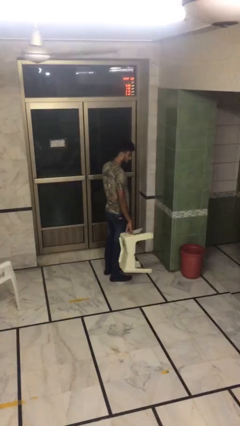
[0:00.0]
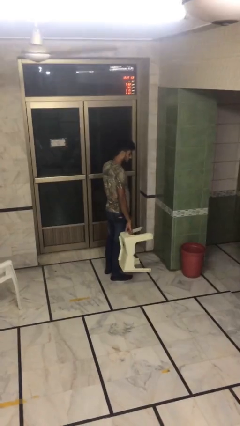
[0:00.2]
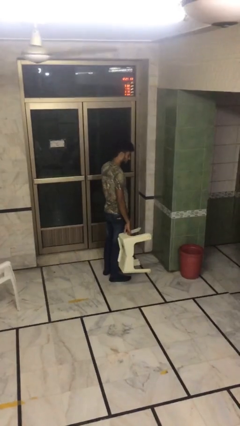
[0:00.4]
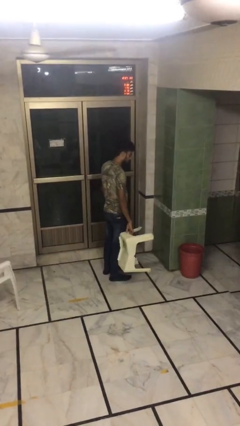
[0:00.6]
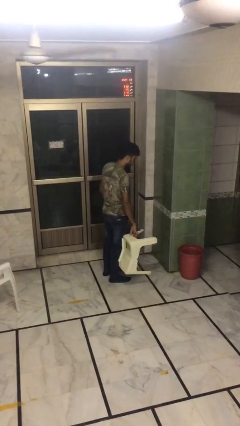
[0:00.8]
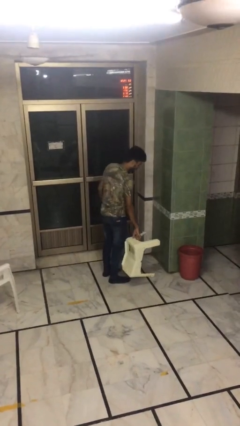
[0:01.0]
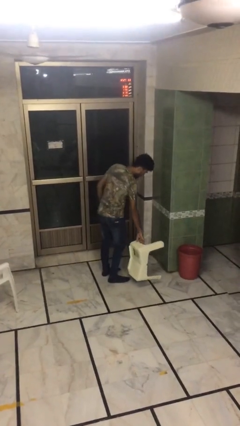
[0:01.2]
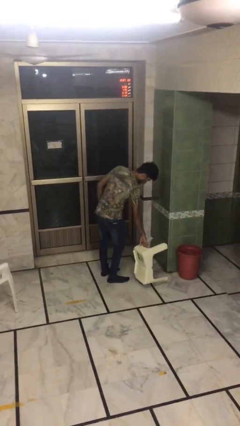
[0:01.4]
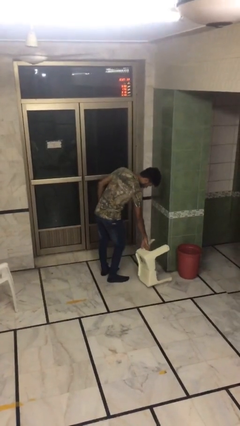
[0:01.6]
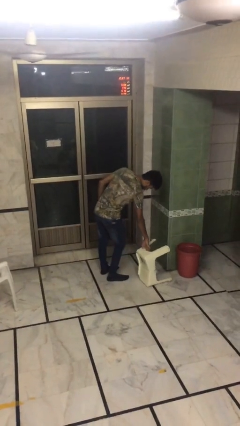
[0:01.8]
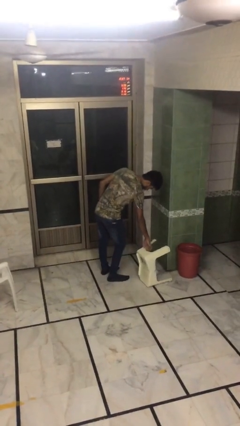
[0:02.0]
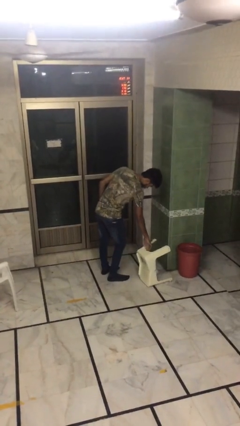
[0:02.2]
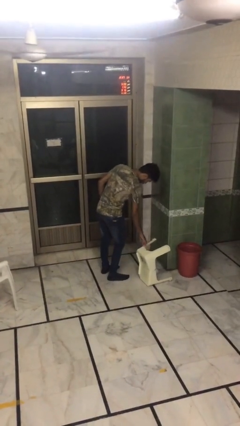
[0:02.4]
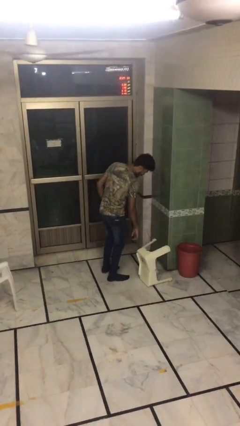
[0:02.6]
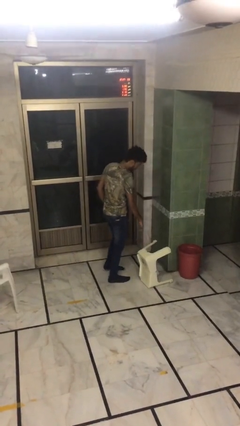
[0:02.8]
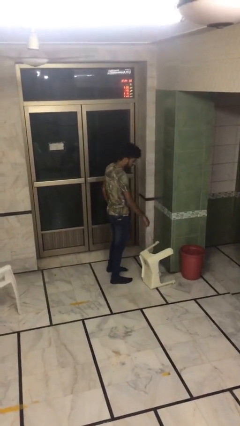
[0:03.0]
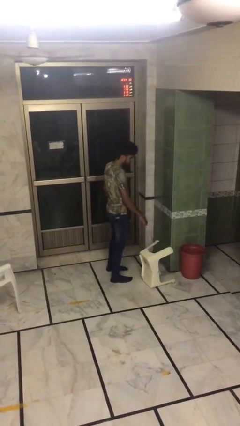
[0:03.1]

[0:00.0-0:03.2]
person puts down object on floor

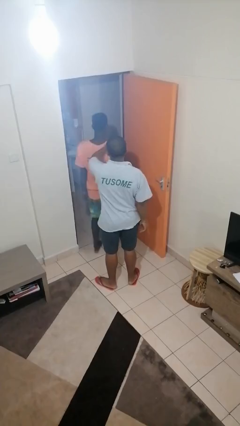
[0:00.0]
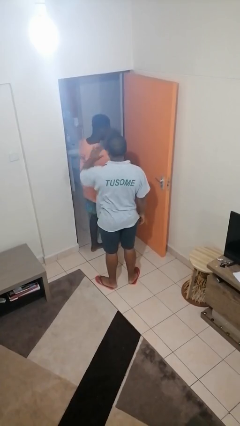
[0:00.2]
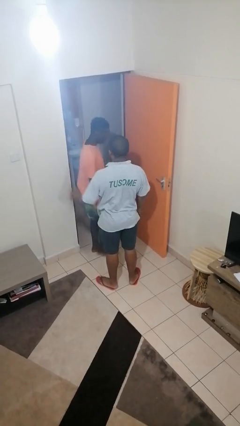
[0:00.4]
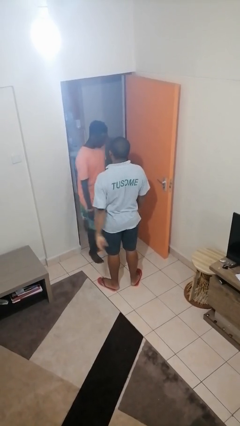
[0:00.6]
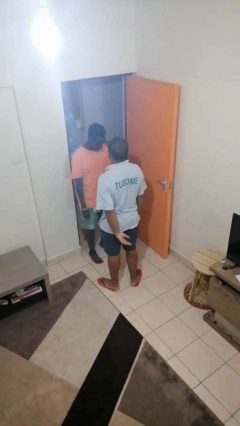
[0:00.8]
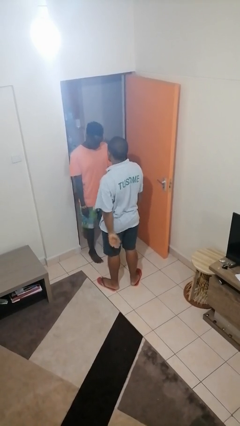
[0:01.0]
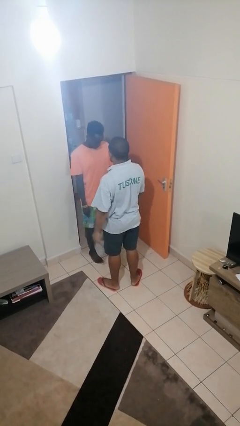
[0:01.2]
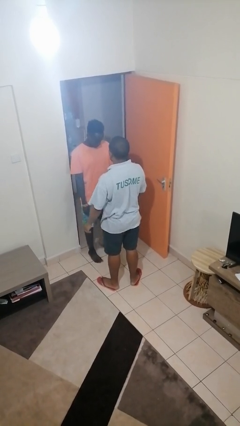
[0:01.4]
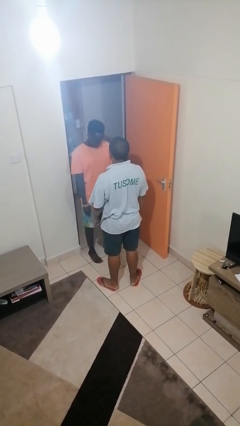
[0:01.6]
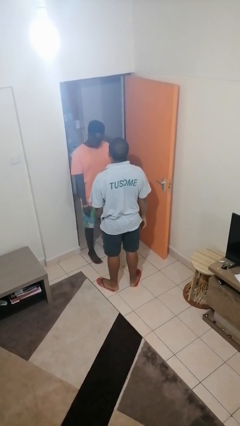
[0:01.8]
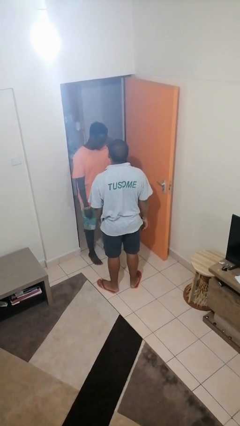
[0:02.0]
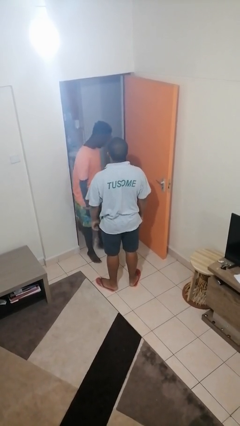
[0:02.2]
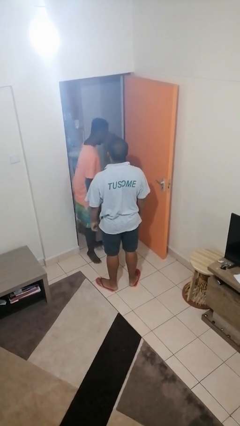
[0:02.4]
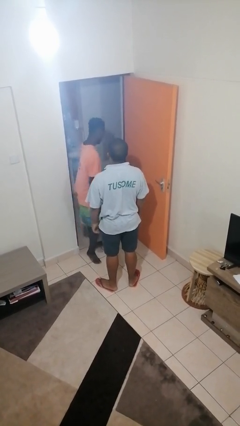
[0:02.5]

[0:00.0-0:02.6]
person spins person around

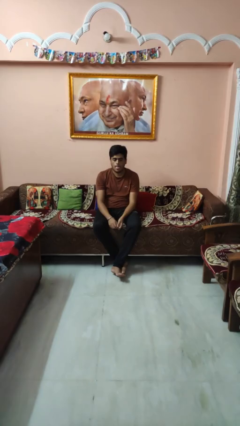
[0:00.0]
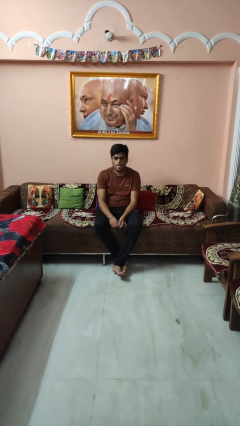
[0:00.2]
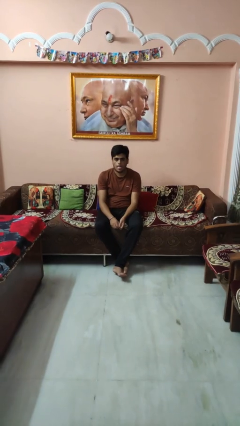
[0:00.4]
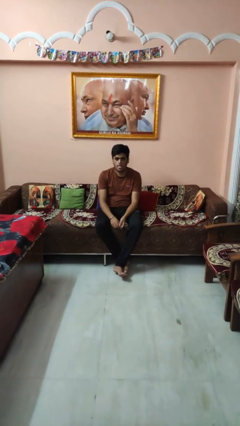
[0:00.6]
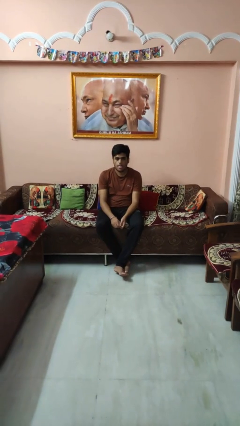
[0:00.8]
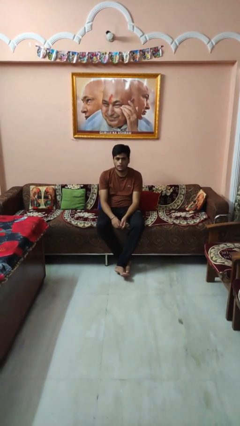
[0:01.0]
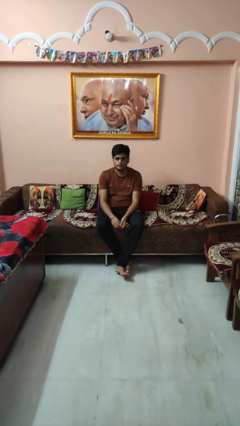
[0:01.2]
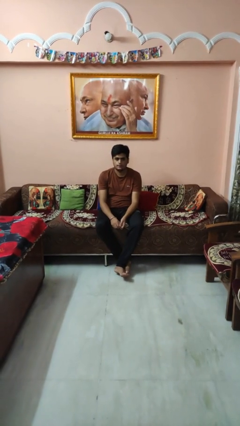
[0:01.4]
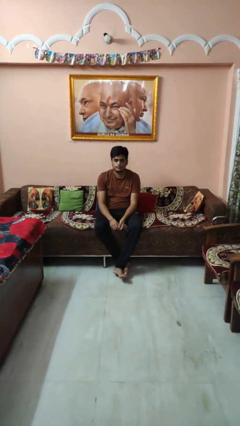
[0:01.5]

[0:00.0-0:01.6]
person sticks out tongue

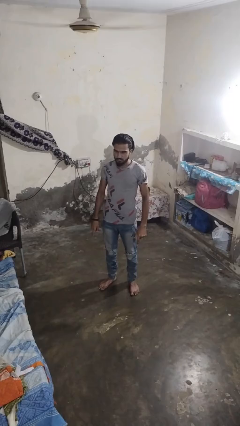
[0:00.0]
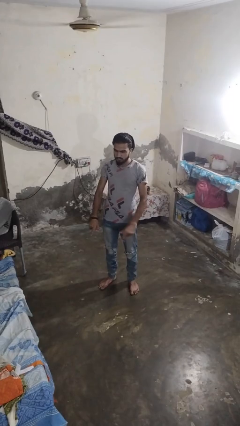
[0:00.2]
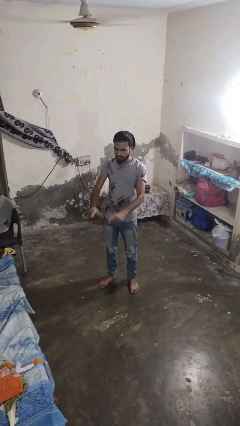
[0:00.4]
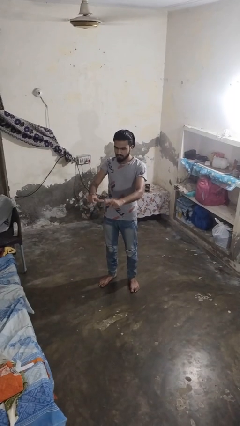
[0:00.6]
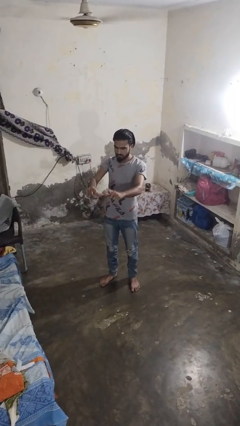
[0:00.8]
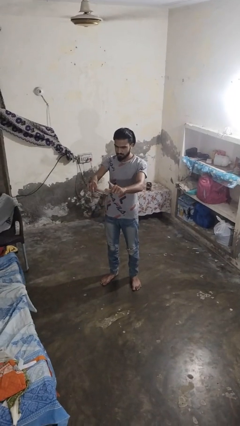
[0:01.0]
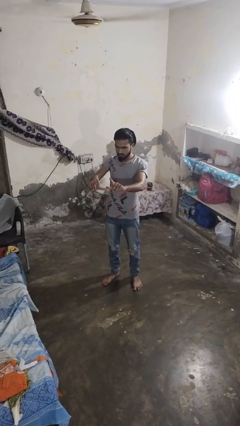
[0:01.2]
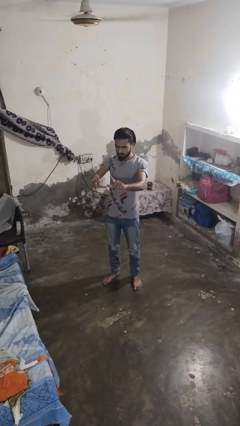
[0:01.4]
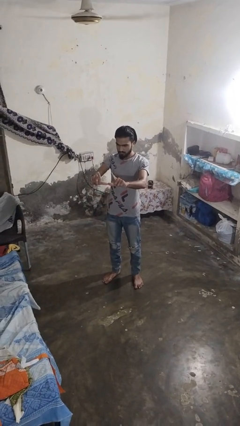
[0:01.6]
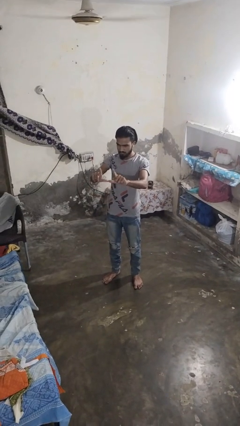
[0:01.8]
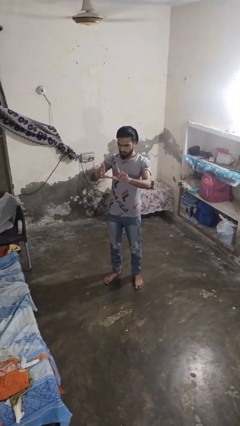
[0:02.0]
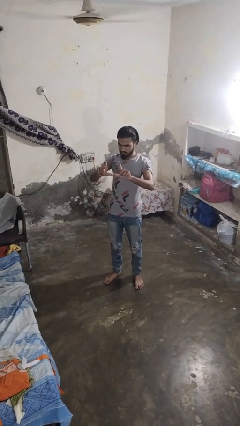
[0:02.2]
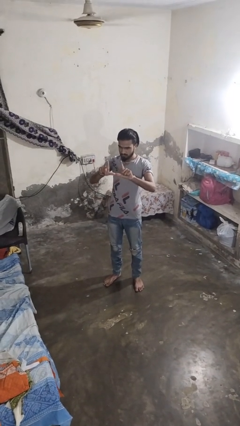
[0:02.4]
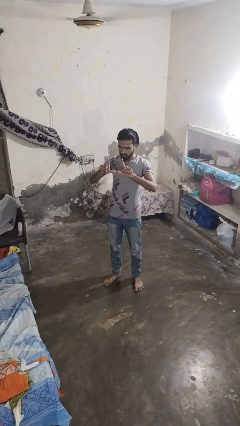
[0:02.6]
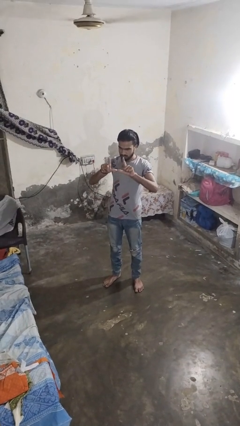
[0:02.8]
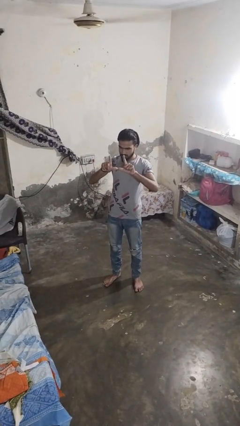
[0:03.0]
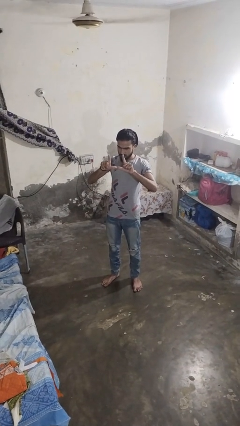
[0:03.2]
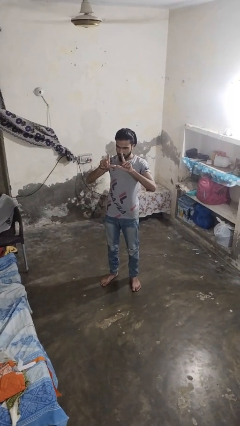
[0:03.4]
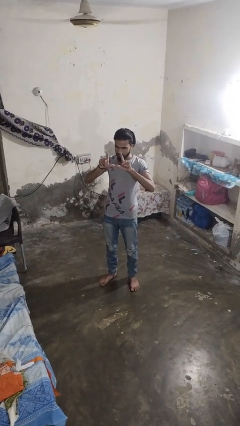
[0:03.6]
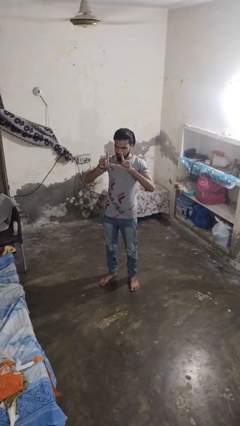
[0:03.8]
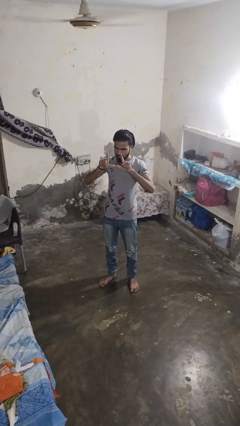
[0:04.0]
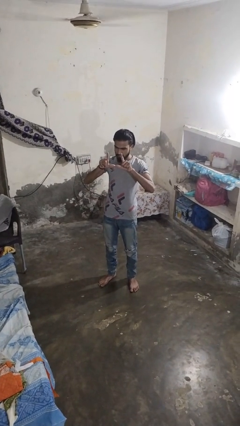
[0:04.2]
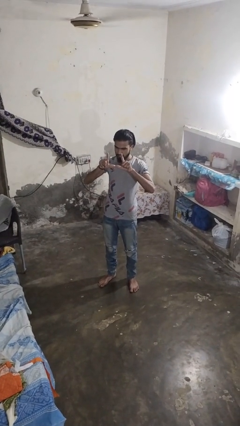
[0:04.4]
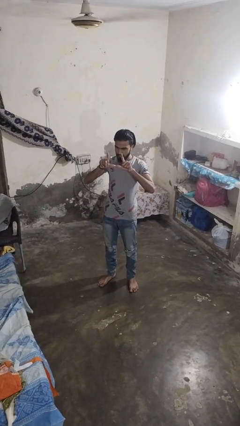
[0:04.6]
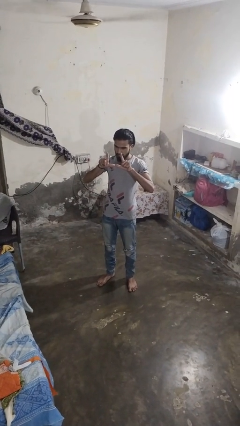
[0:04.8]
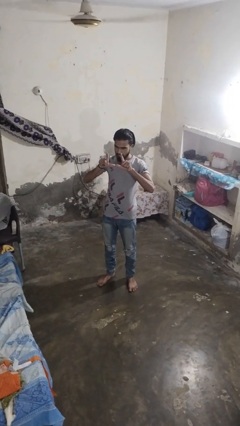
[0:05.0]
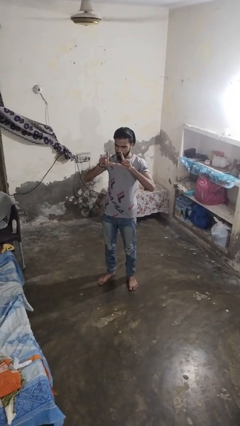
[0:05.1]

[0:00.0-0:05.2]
person gestures zoom in

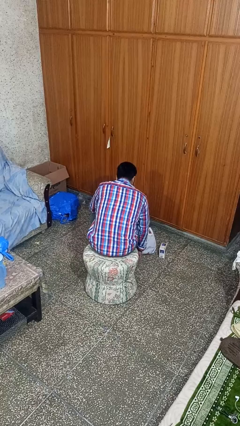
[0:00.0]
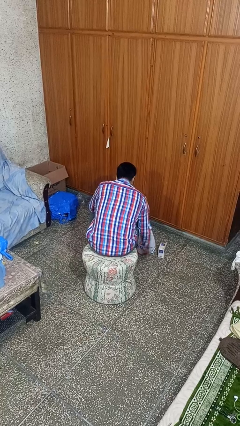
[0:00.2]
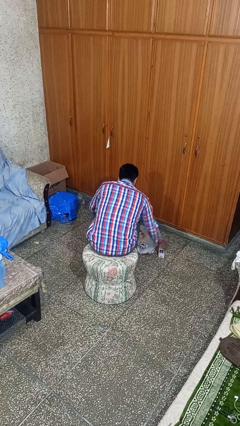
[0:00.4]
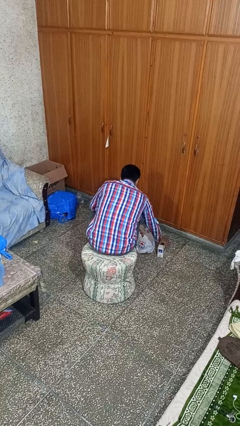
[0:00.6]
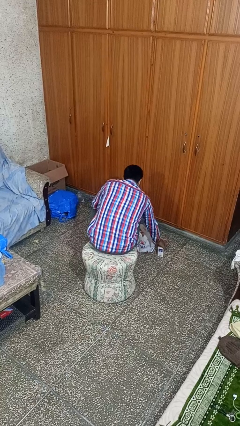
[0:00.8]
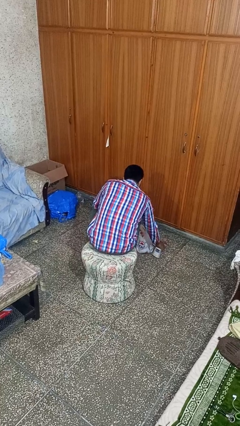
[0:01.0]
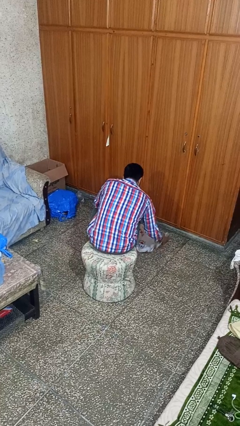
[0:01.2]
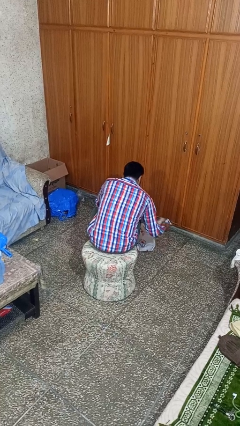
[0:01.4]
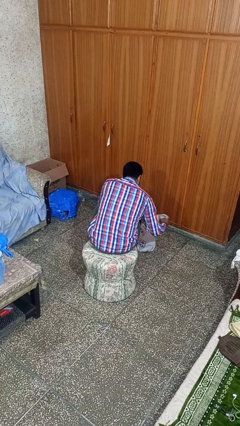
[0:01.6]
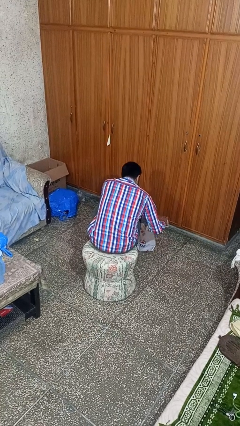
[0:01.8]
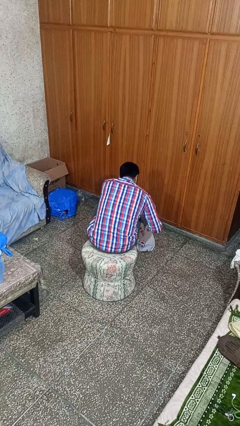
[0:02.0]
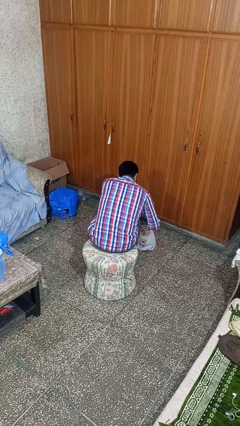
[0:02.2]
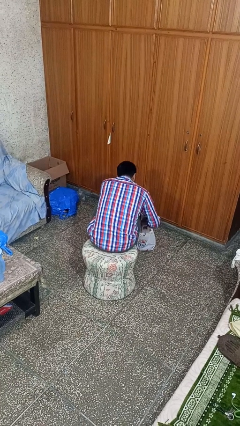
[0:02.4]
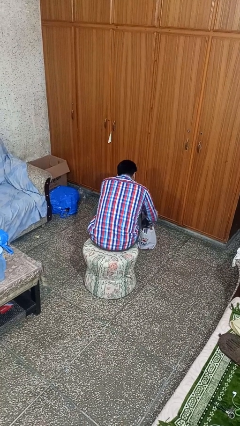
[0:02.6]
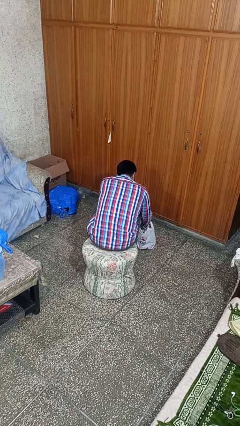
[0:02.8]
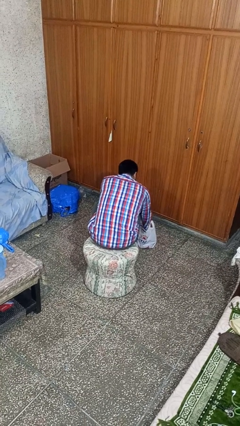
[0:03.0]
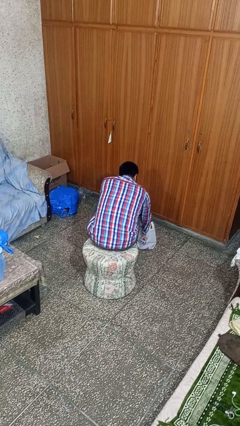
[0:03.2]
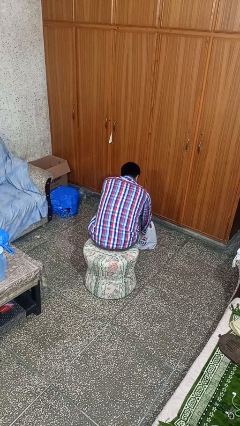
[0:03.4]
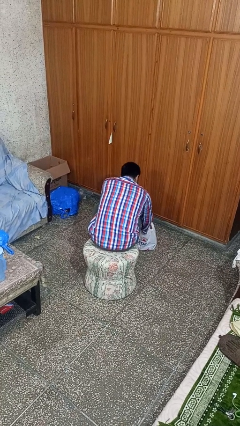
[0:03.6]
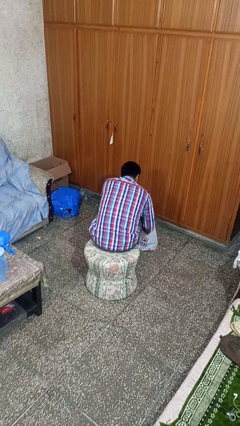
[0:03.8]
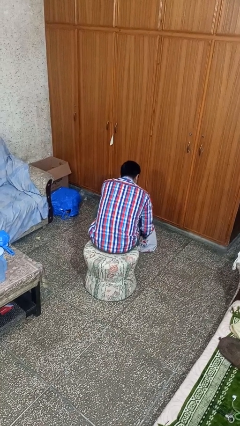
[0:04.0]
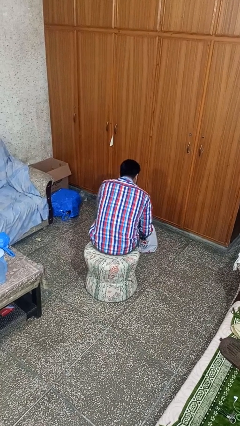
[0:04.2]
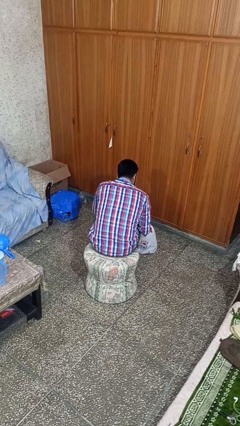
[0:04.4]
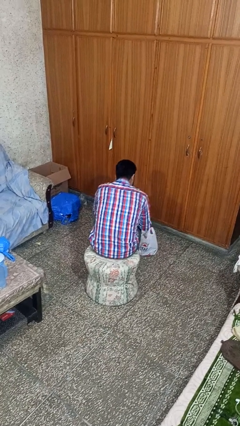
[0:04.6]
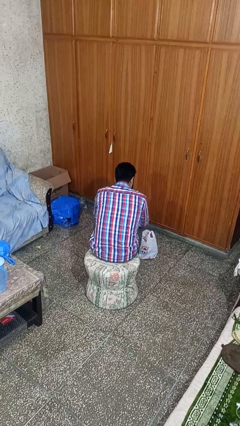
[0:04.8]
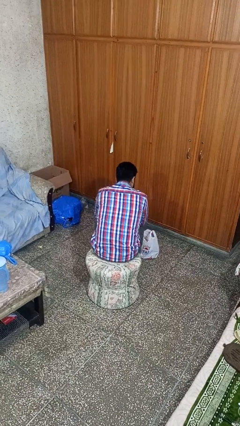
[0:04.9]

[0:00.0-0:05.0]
person puts object into bag
